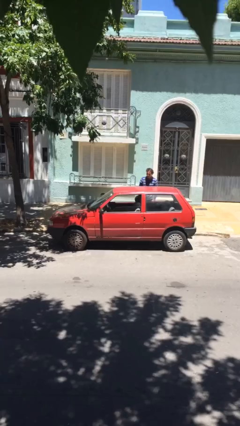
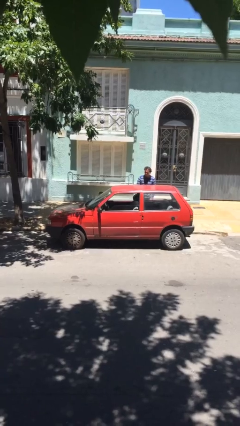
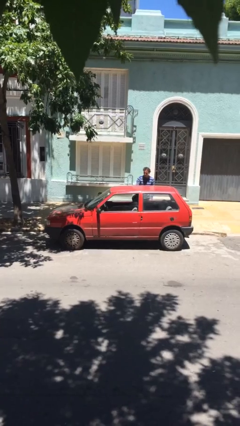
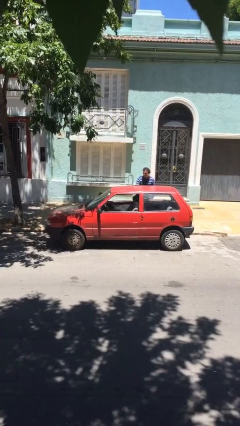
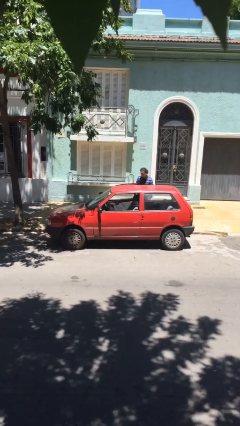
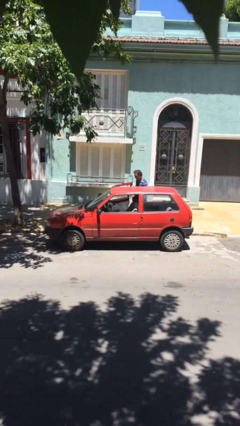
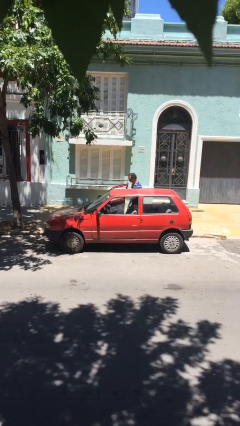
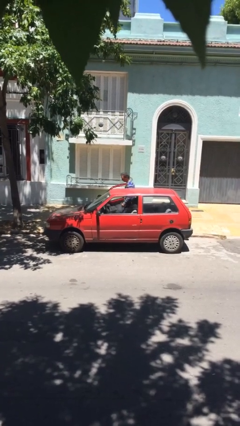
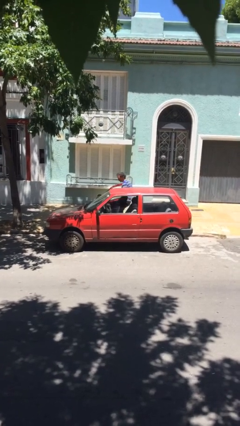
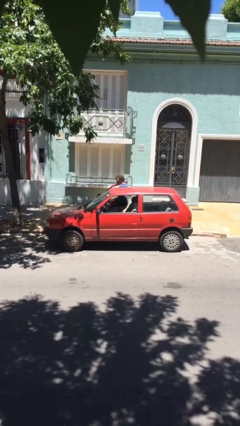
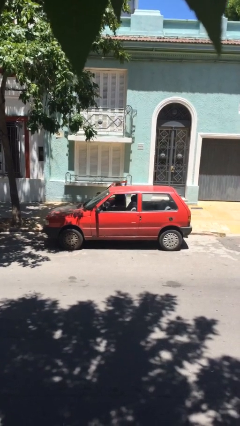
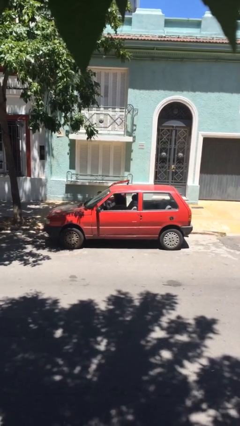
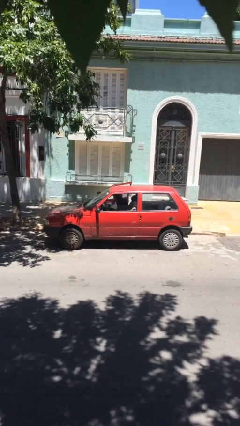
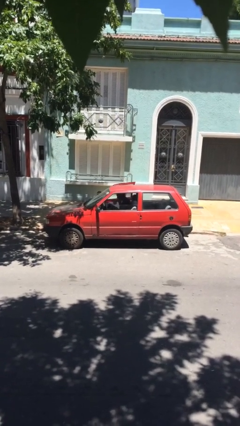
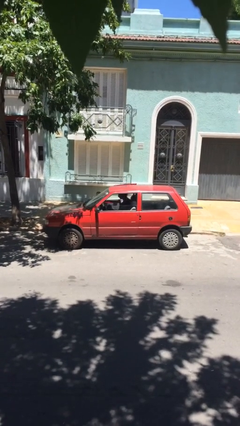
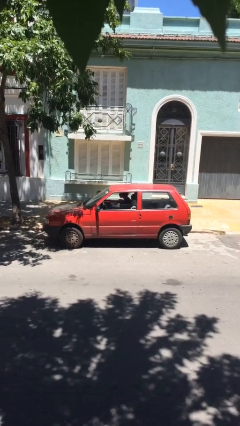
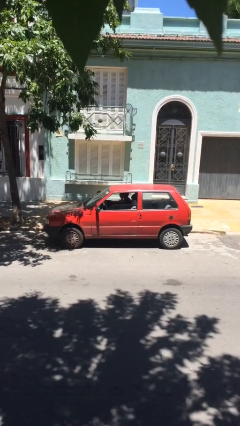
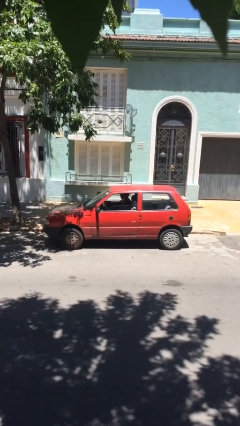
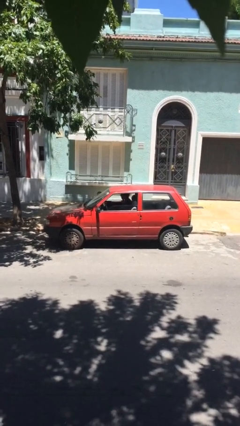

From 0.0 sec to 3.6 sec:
car picks up person

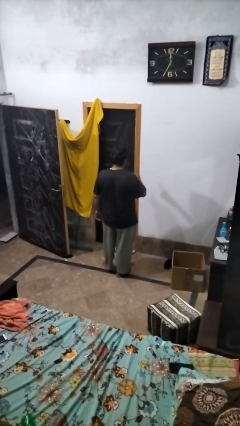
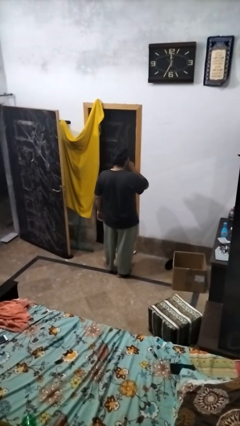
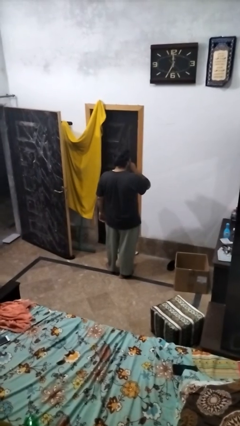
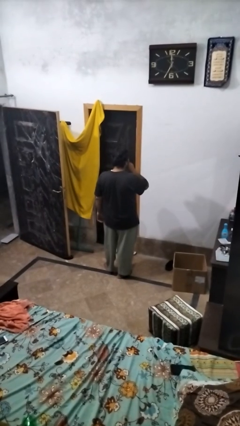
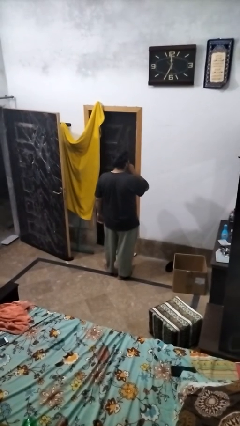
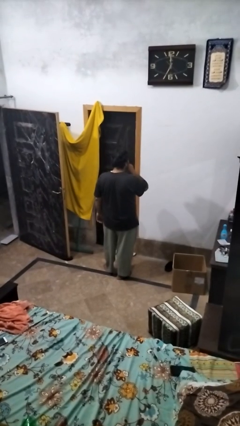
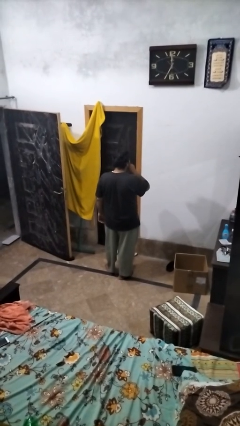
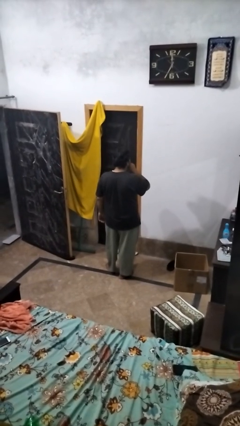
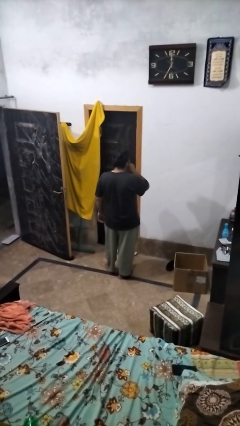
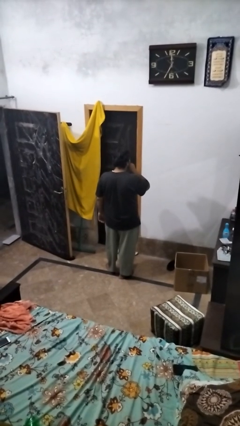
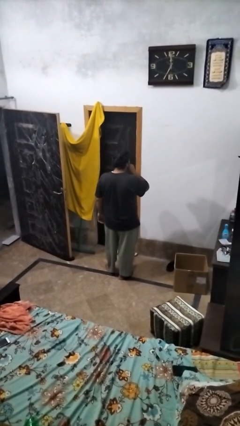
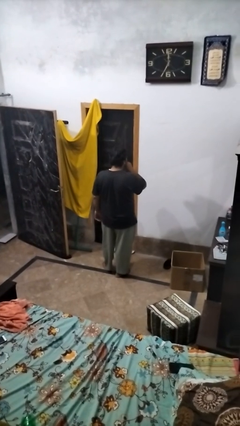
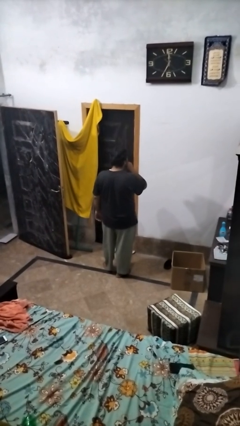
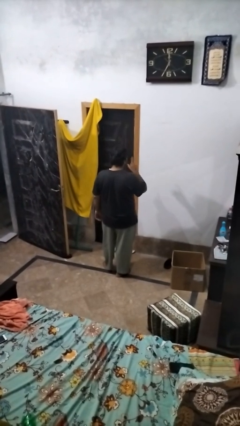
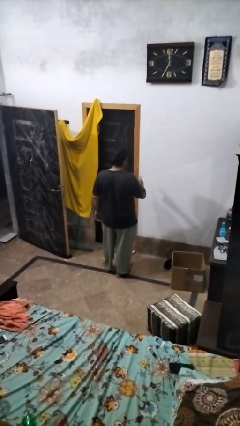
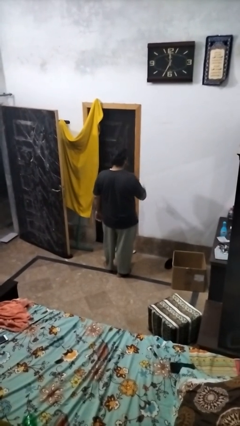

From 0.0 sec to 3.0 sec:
person gestures be quiet

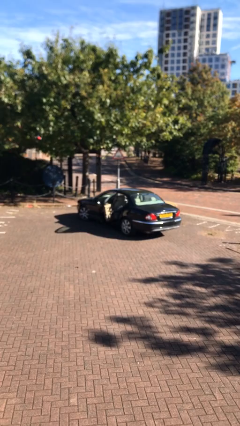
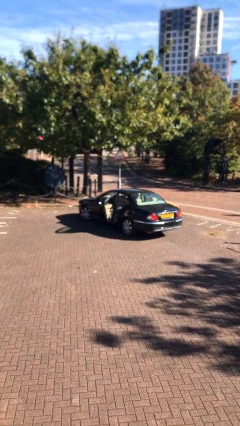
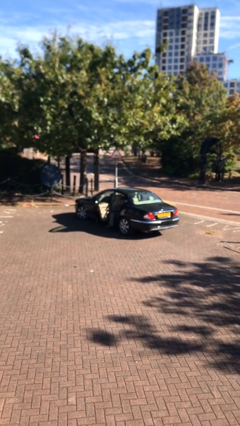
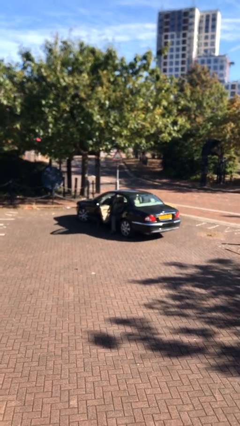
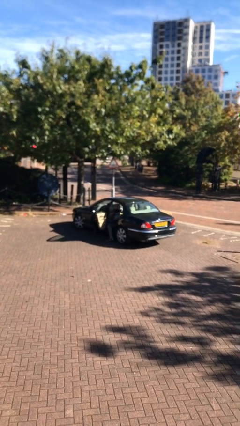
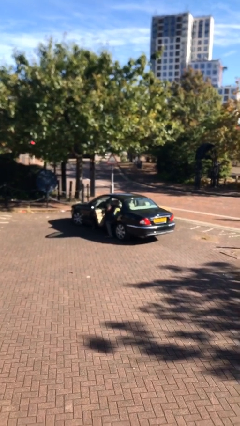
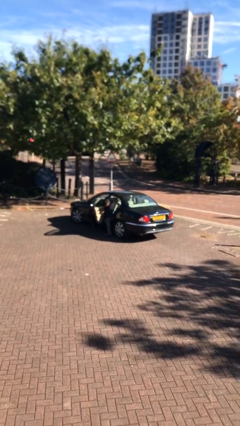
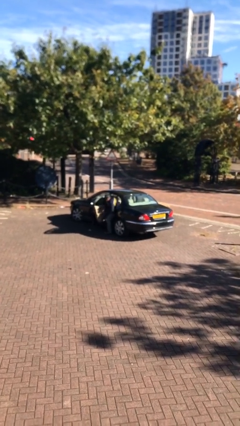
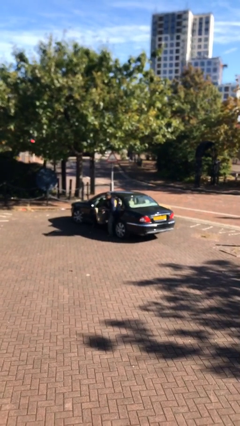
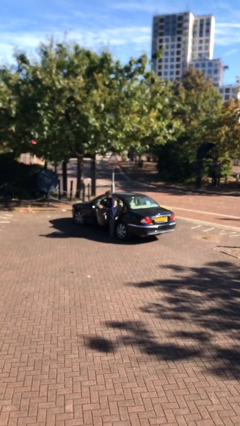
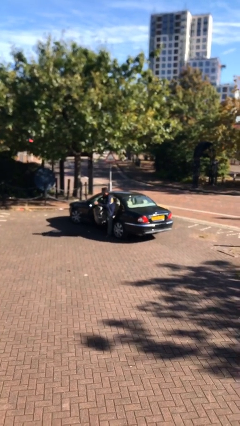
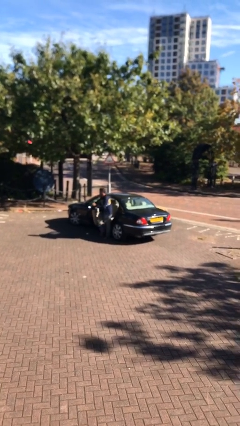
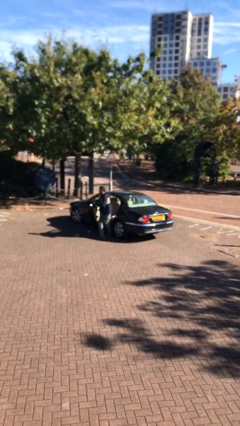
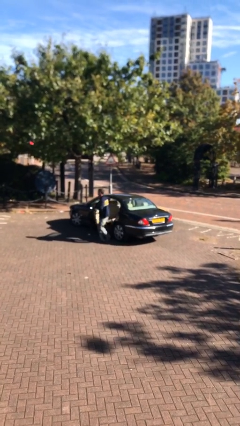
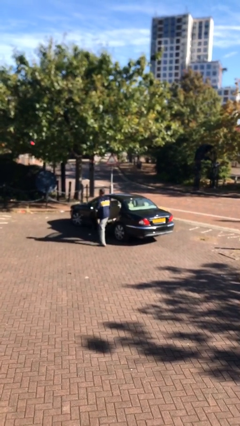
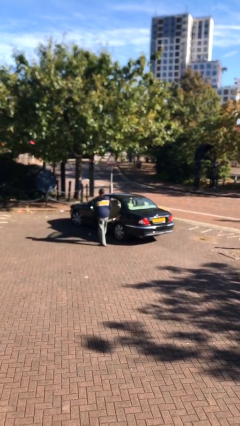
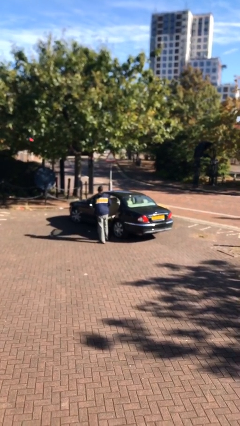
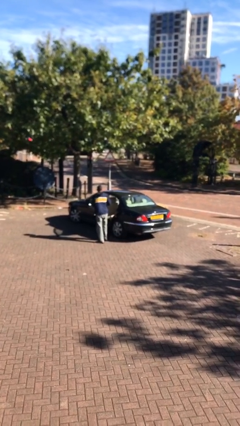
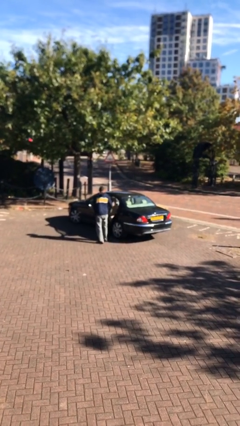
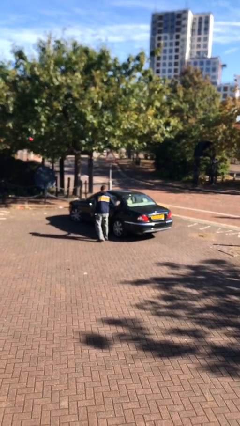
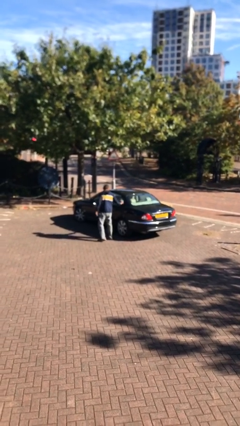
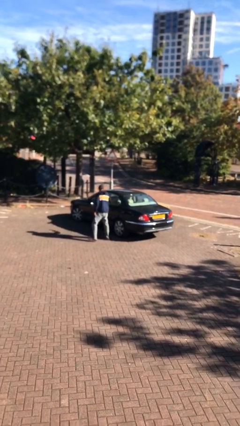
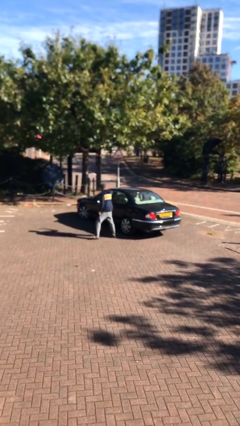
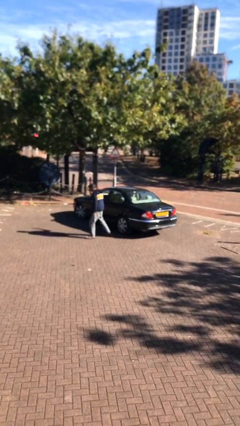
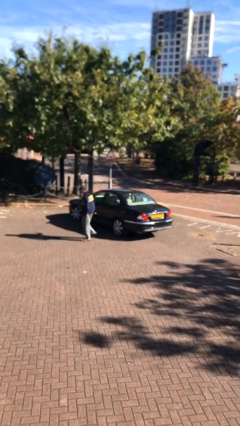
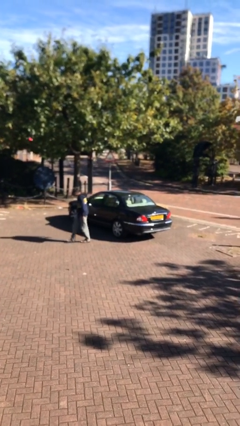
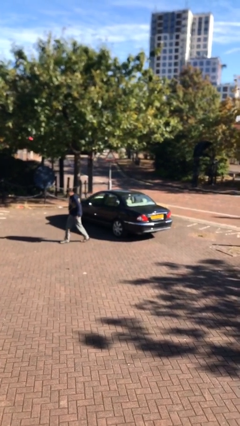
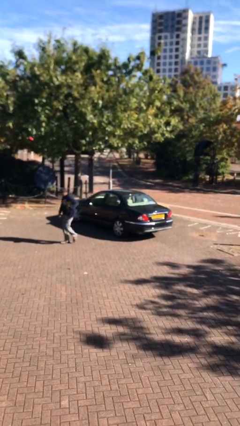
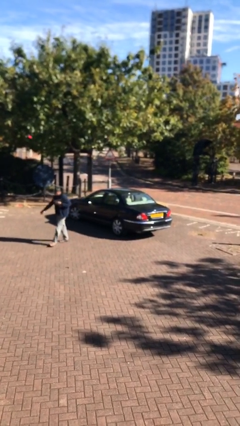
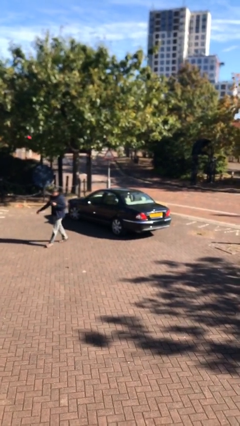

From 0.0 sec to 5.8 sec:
car drops off person

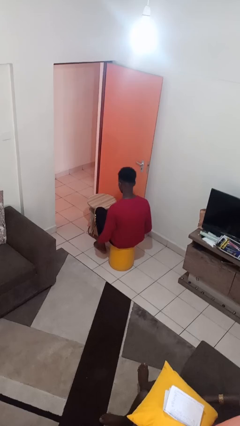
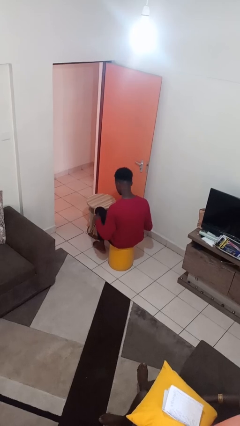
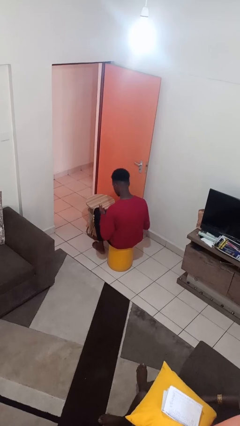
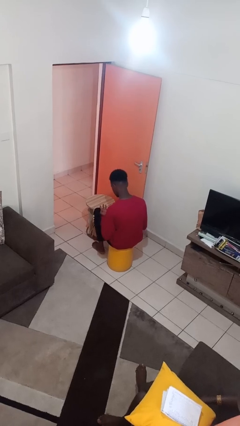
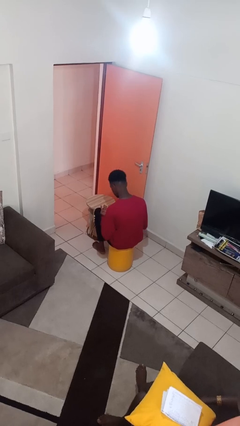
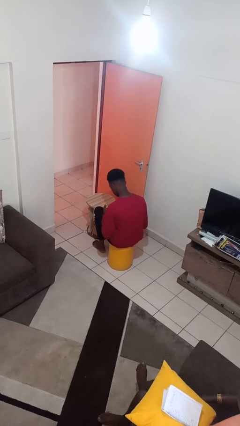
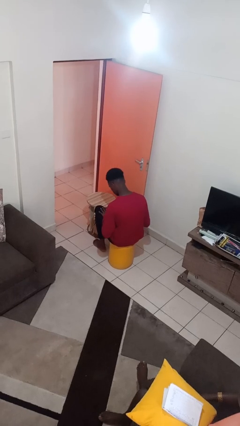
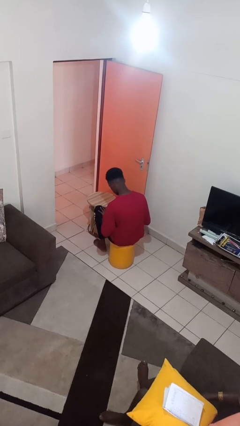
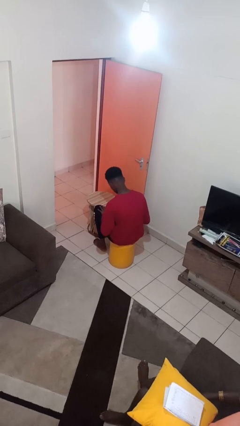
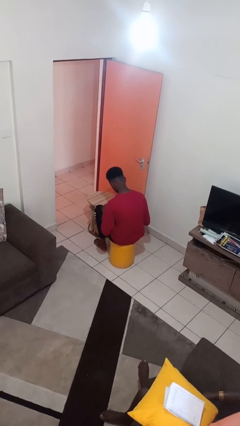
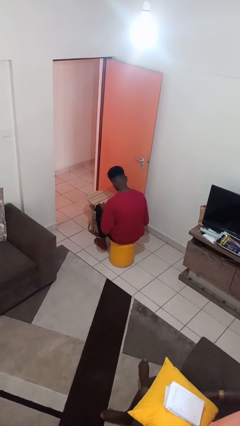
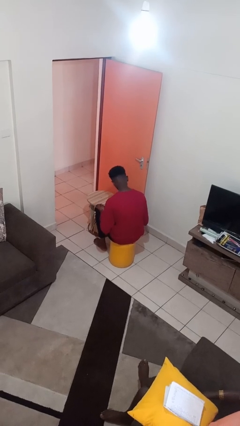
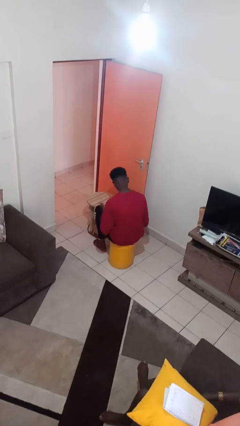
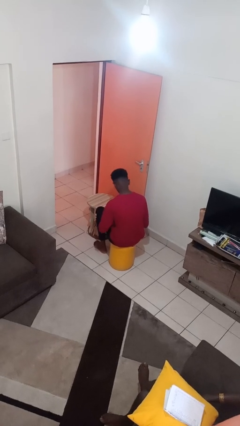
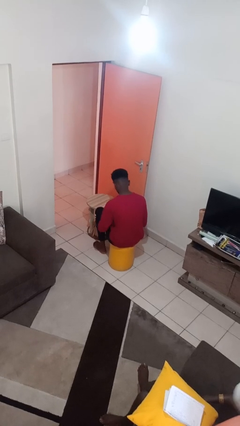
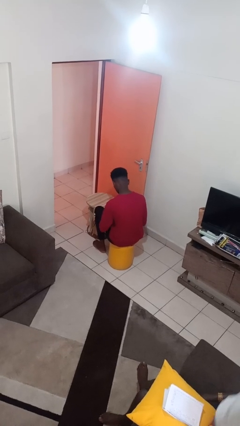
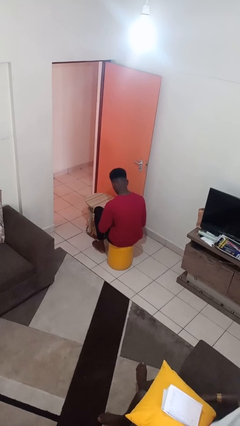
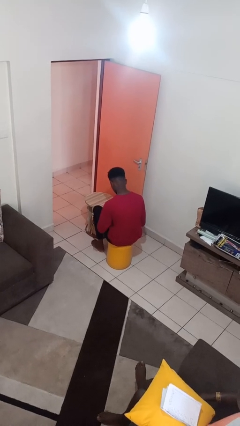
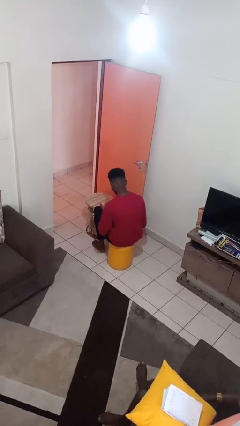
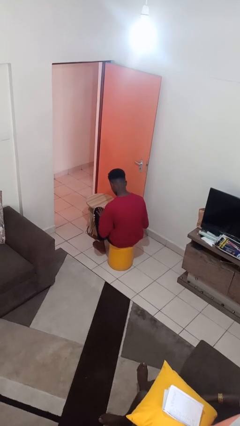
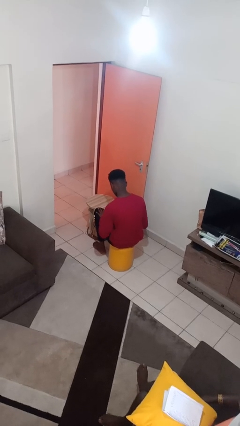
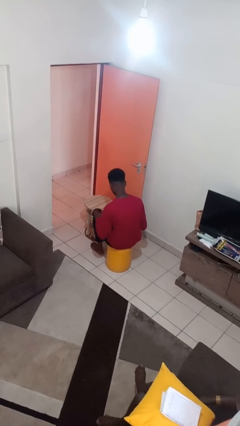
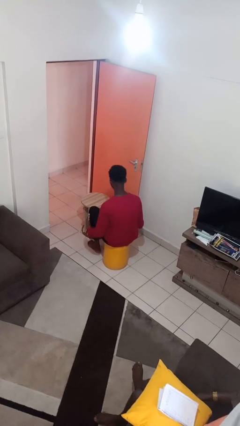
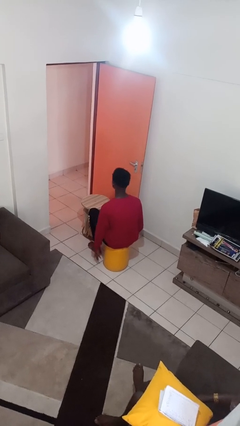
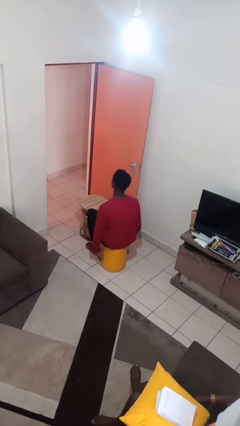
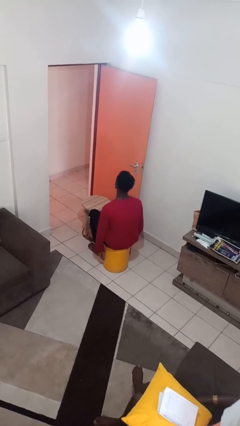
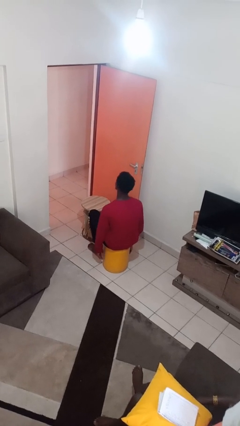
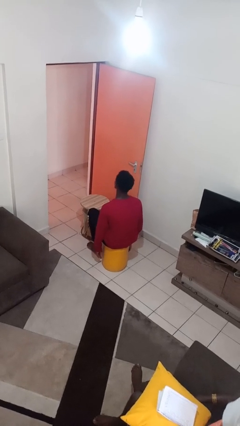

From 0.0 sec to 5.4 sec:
person looks at hands in lap

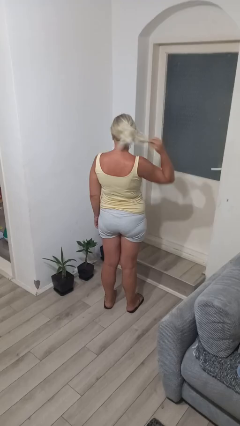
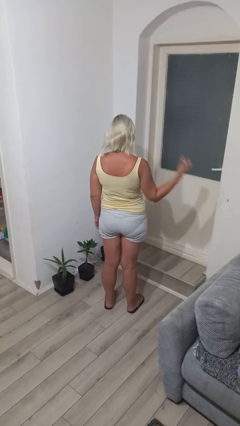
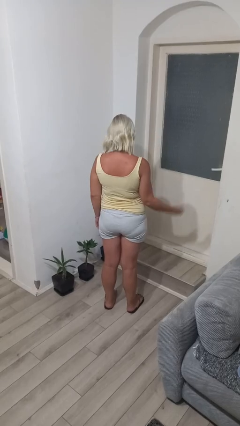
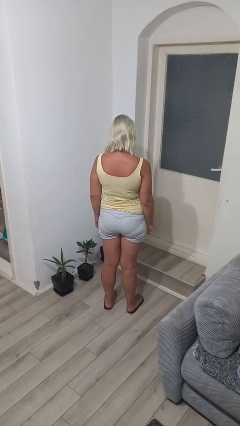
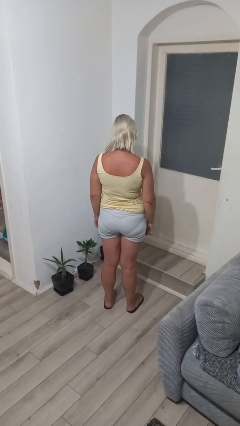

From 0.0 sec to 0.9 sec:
person takes off hairtie
